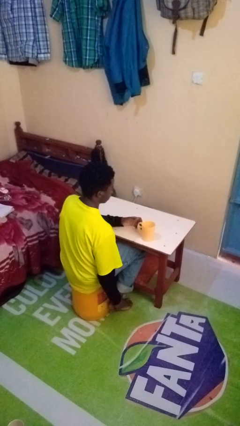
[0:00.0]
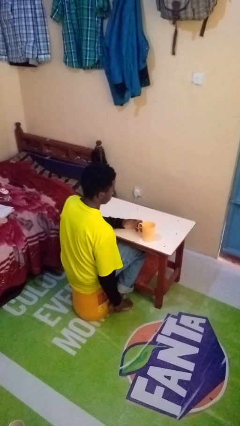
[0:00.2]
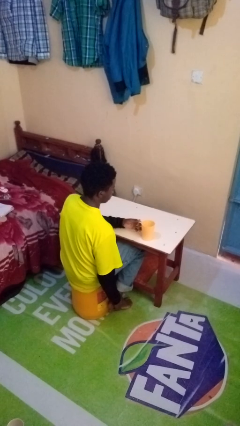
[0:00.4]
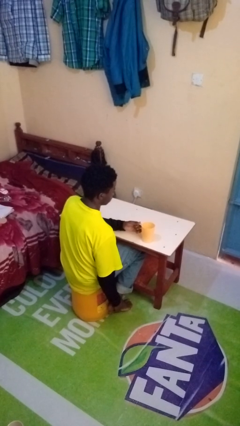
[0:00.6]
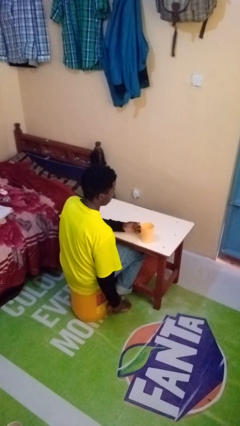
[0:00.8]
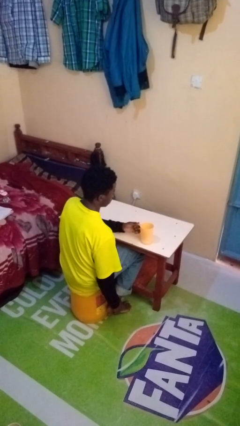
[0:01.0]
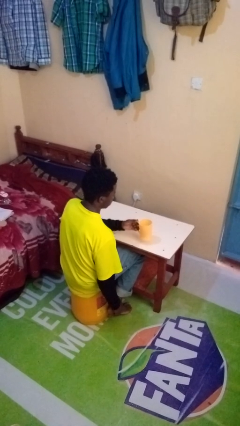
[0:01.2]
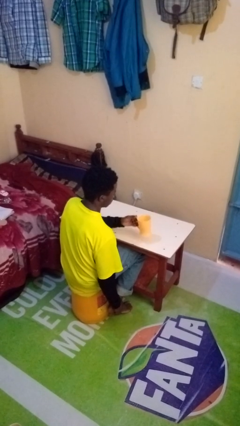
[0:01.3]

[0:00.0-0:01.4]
person picks up object from table

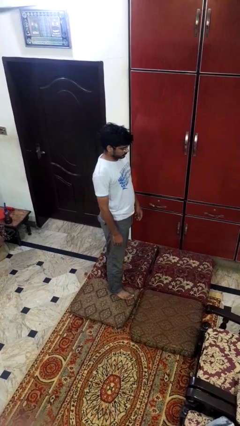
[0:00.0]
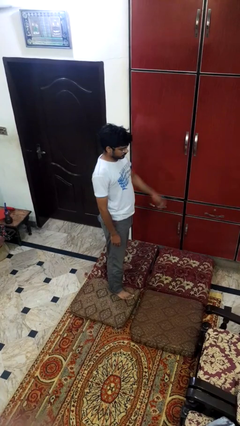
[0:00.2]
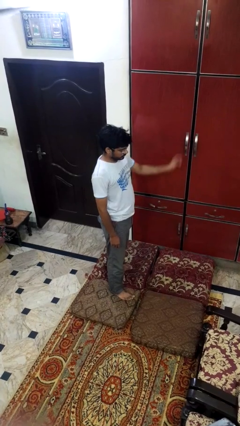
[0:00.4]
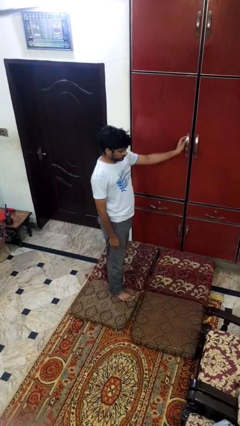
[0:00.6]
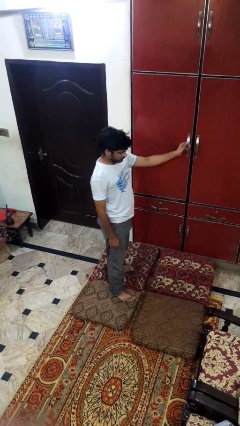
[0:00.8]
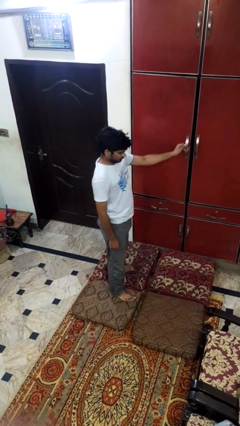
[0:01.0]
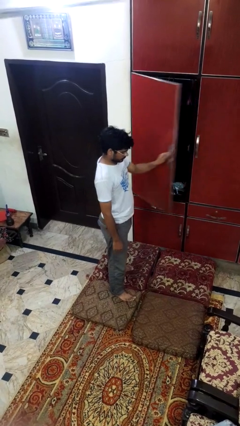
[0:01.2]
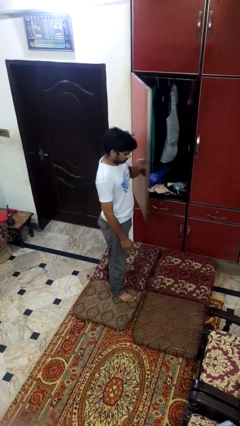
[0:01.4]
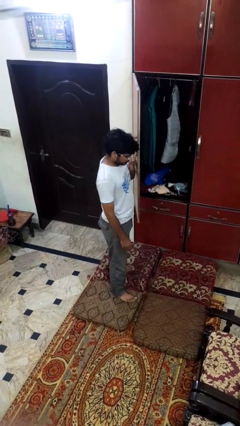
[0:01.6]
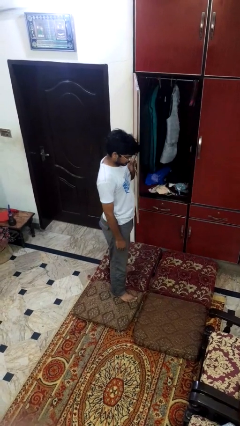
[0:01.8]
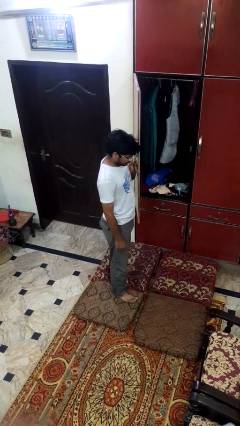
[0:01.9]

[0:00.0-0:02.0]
person opens closet door

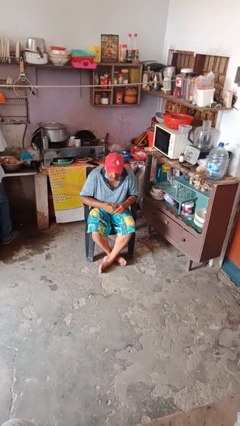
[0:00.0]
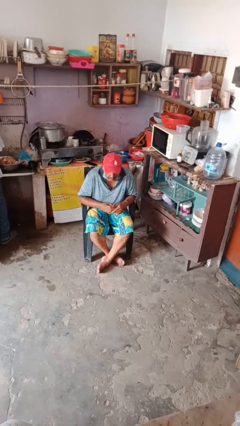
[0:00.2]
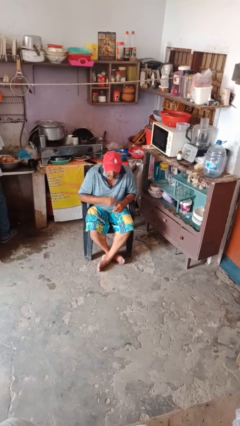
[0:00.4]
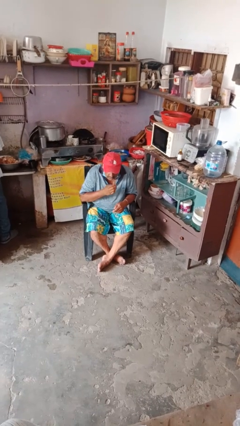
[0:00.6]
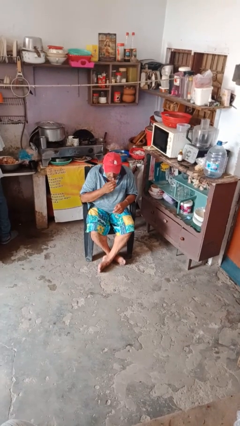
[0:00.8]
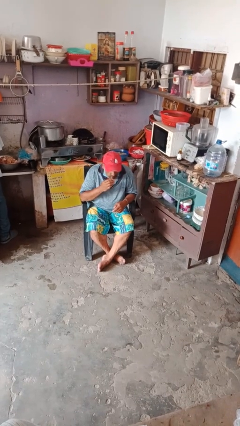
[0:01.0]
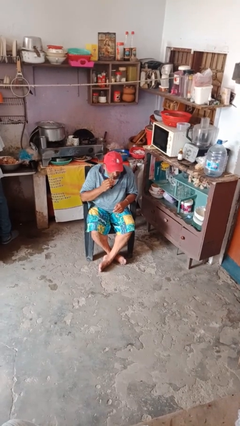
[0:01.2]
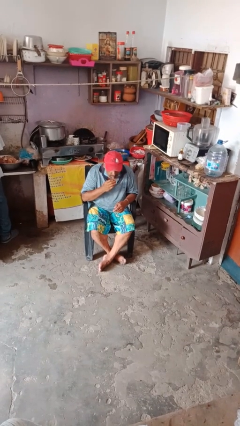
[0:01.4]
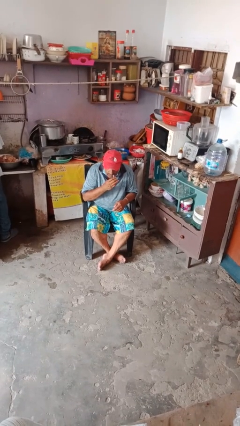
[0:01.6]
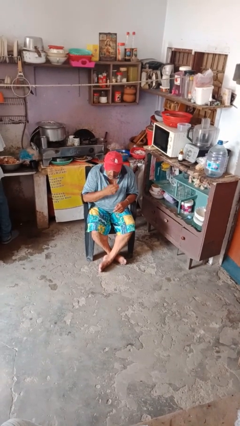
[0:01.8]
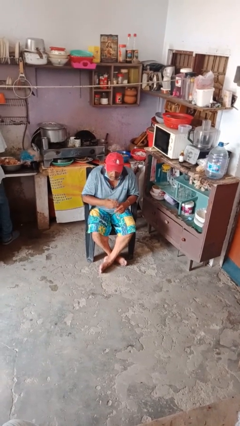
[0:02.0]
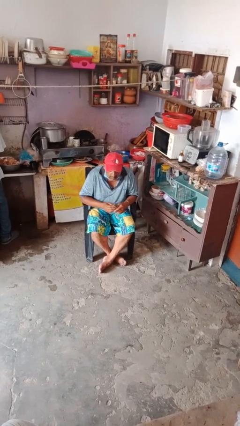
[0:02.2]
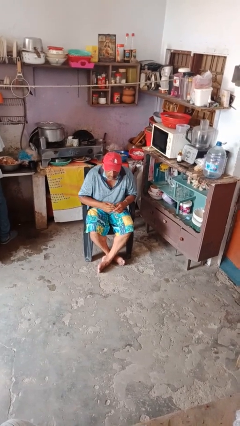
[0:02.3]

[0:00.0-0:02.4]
person applies lip makeup

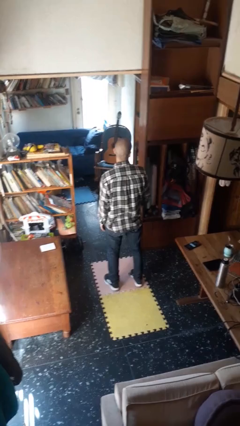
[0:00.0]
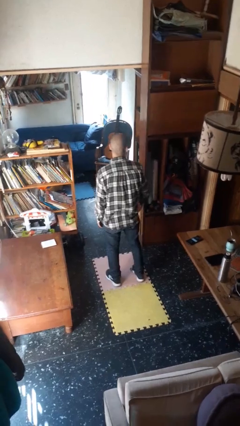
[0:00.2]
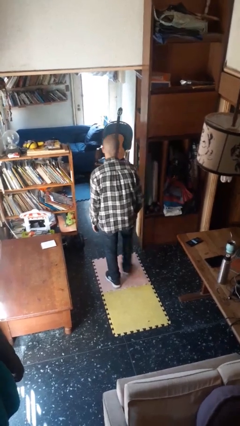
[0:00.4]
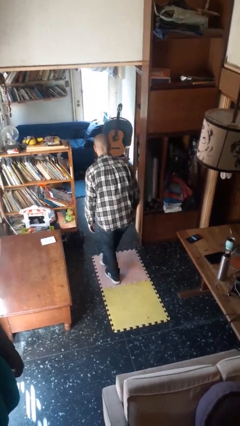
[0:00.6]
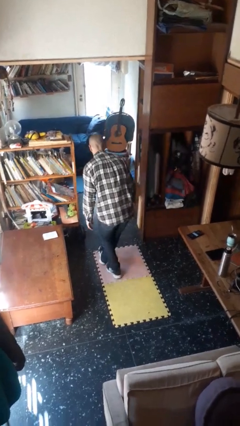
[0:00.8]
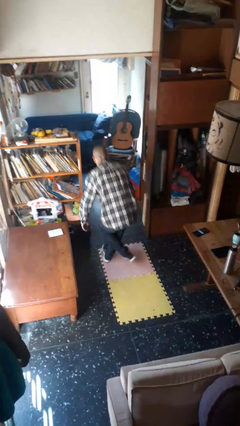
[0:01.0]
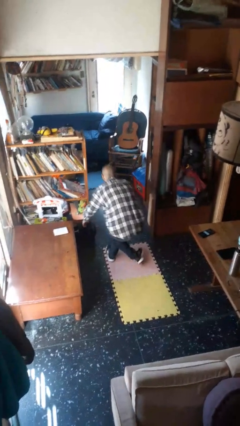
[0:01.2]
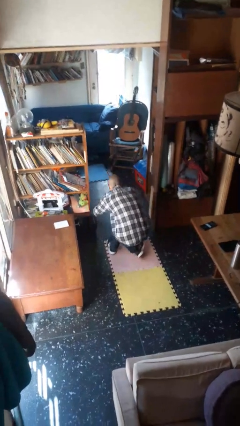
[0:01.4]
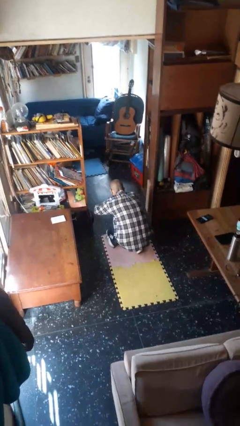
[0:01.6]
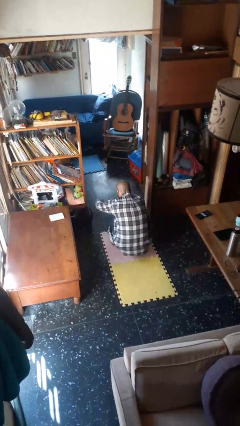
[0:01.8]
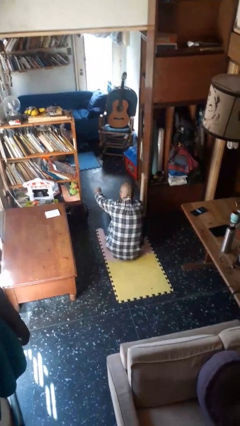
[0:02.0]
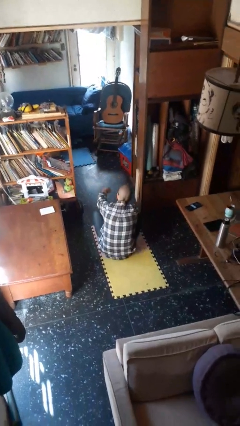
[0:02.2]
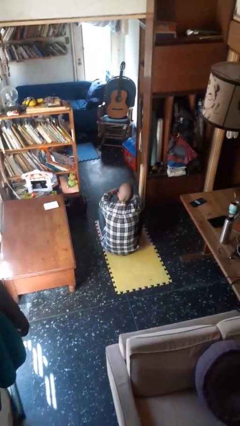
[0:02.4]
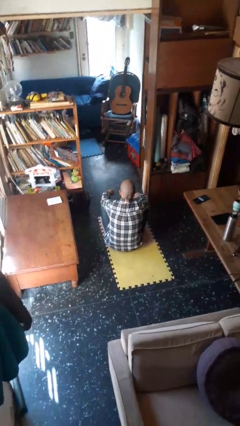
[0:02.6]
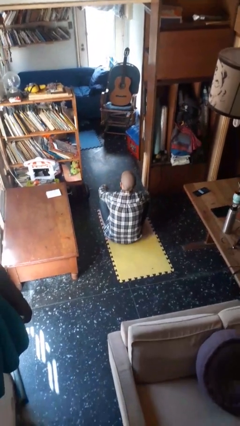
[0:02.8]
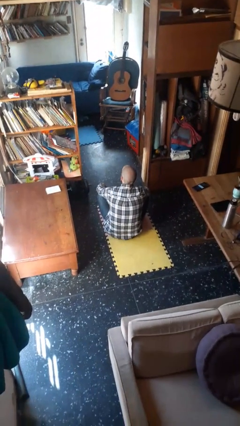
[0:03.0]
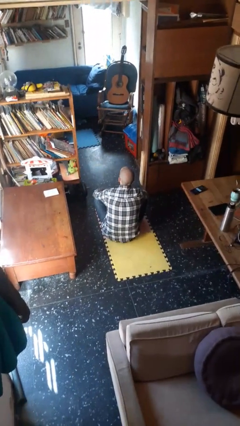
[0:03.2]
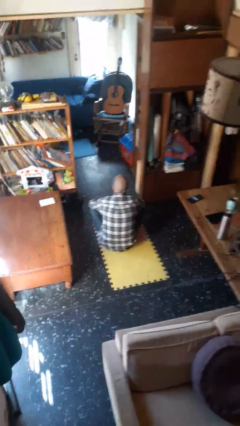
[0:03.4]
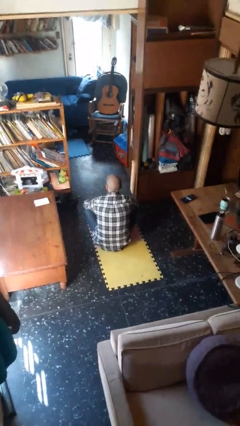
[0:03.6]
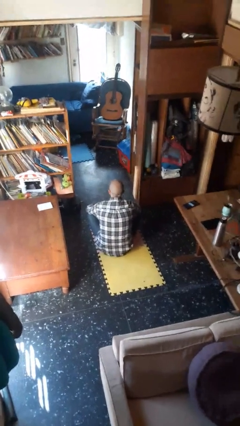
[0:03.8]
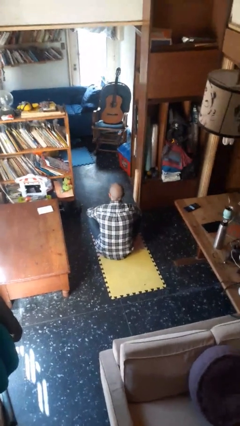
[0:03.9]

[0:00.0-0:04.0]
person sits crisscross

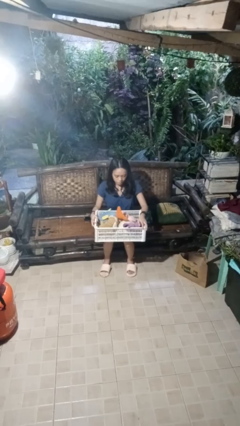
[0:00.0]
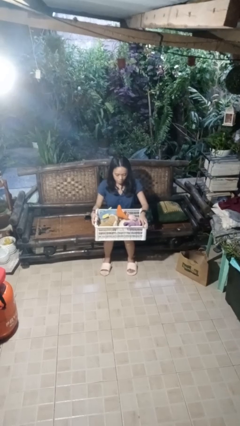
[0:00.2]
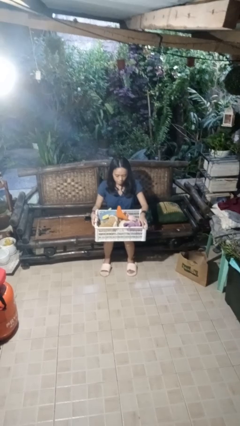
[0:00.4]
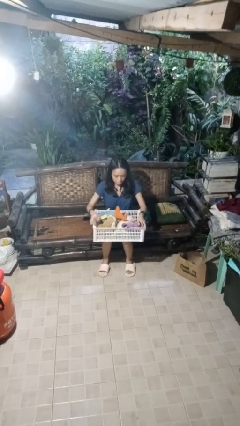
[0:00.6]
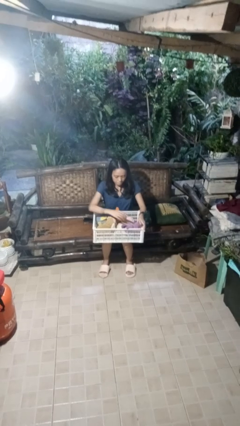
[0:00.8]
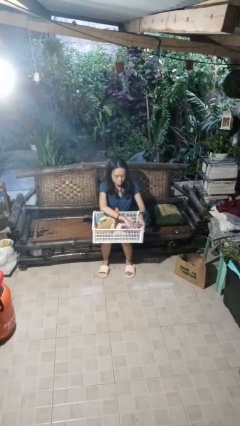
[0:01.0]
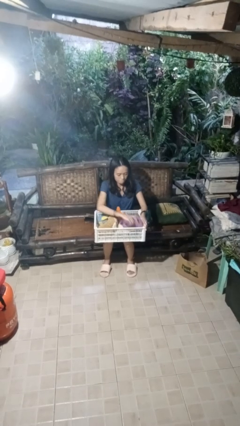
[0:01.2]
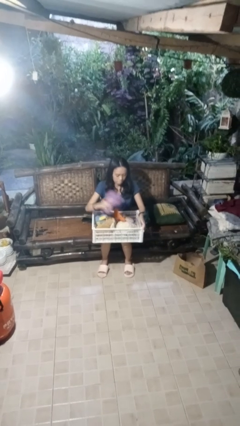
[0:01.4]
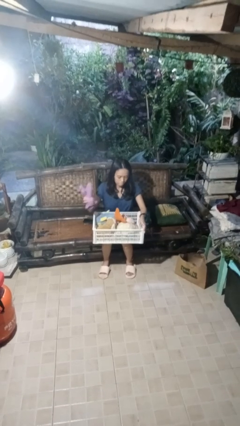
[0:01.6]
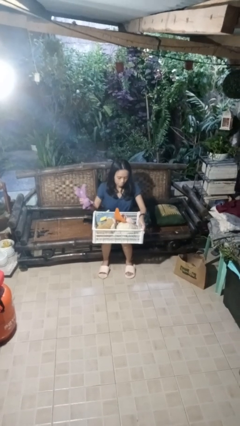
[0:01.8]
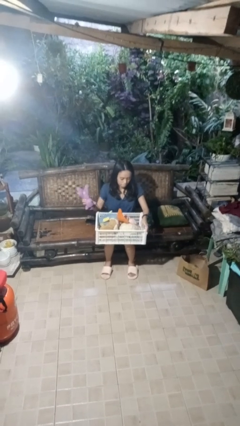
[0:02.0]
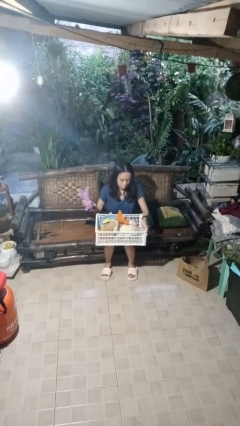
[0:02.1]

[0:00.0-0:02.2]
person takes object from basket

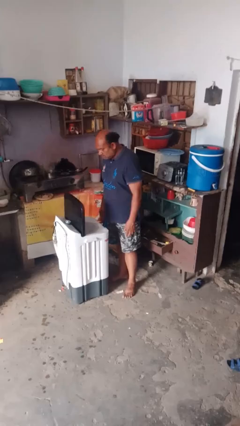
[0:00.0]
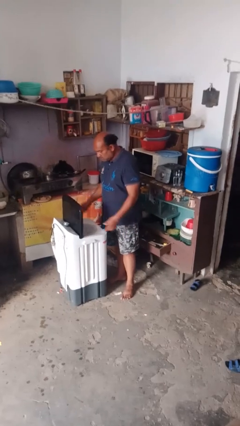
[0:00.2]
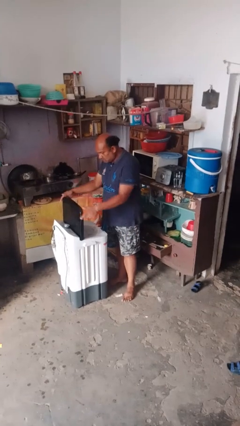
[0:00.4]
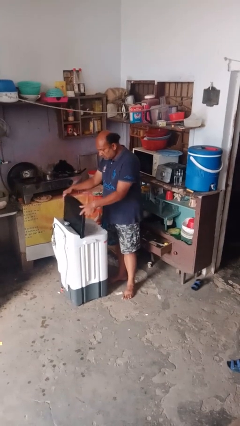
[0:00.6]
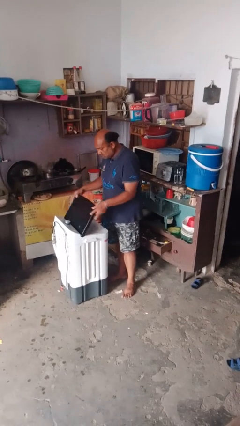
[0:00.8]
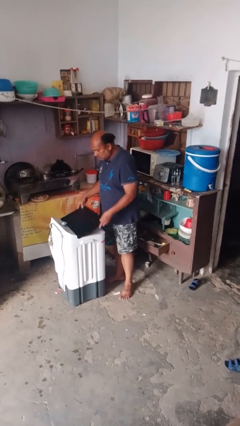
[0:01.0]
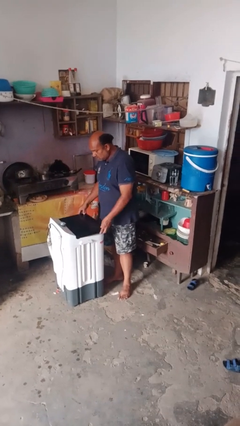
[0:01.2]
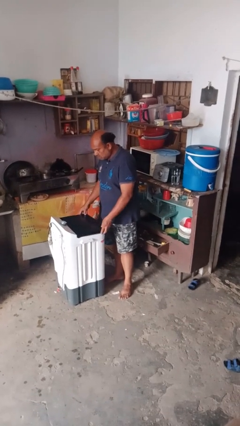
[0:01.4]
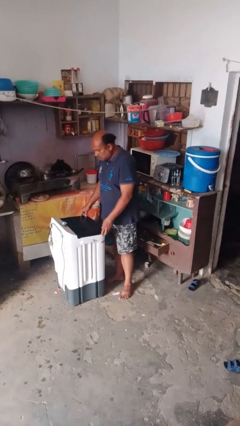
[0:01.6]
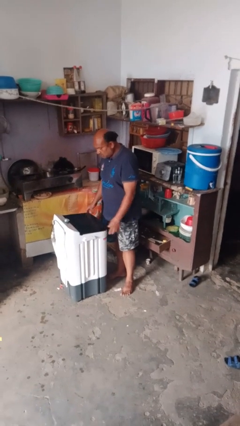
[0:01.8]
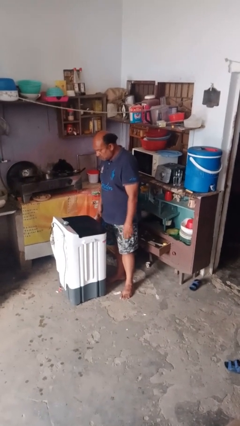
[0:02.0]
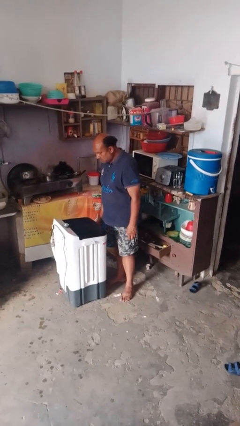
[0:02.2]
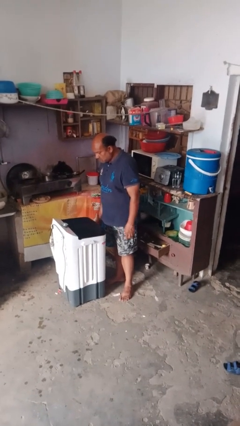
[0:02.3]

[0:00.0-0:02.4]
person closes clothes washer

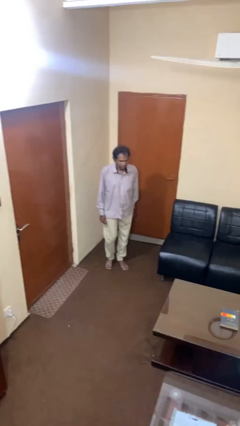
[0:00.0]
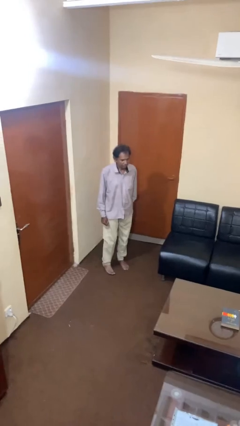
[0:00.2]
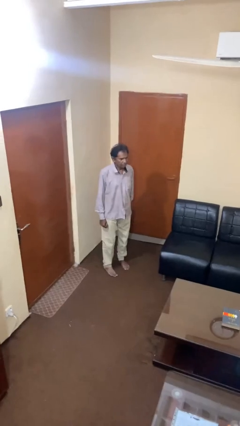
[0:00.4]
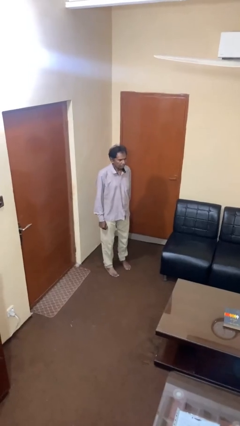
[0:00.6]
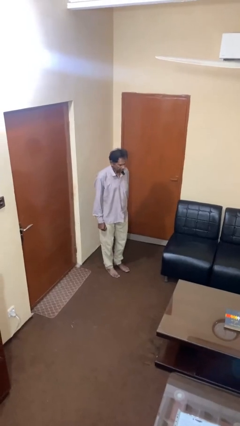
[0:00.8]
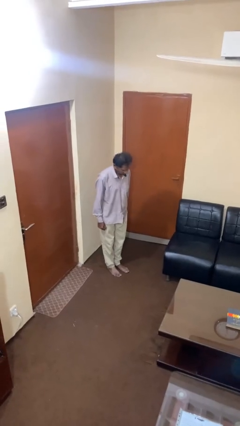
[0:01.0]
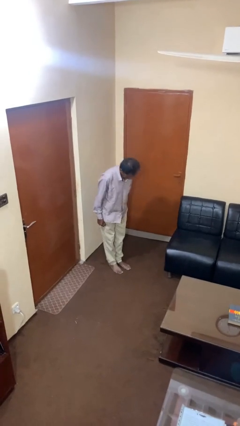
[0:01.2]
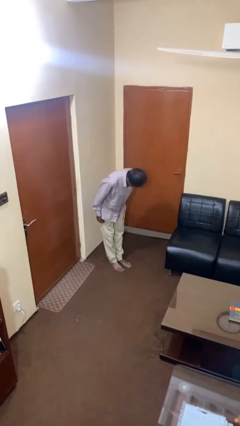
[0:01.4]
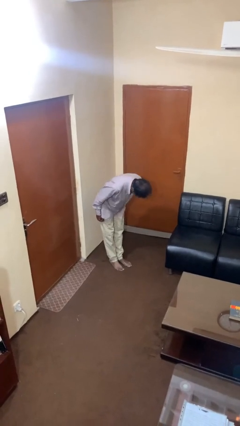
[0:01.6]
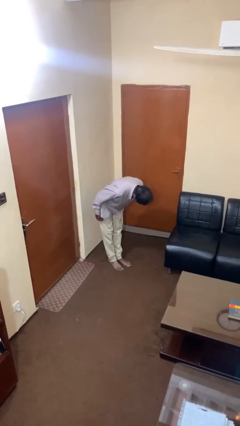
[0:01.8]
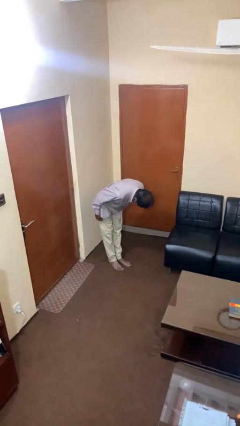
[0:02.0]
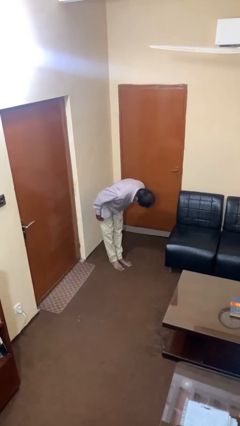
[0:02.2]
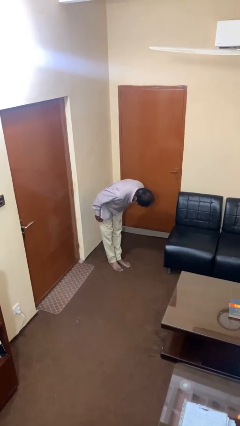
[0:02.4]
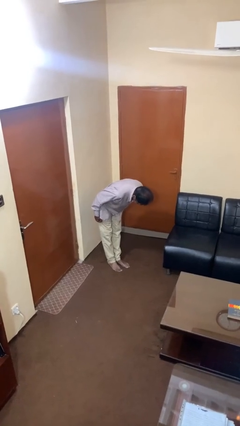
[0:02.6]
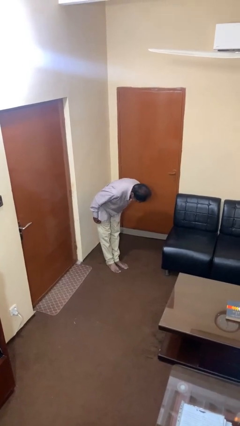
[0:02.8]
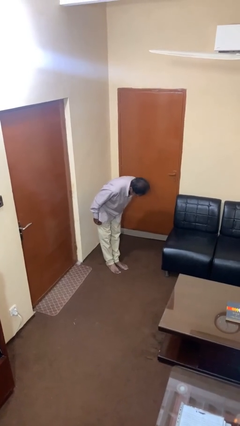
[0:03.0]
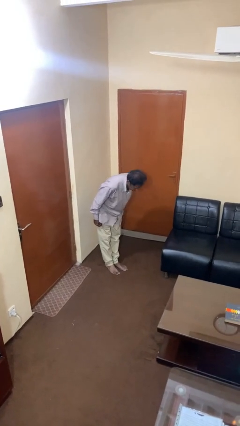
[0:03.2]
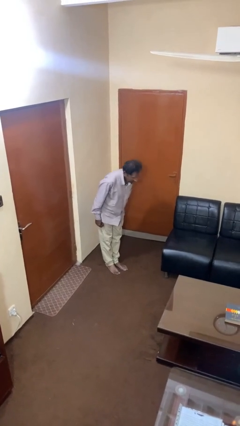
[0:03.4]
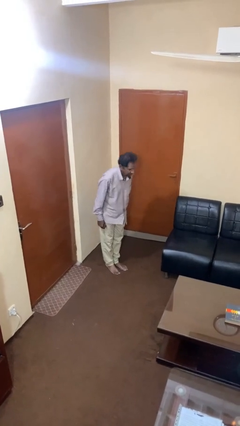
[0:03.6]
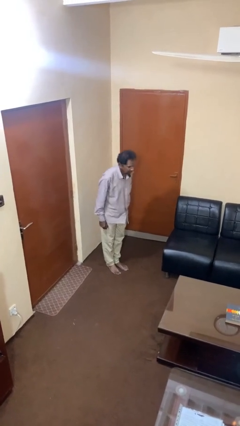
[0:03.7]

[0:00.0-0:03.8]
person bows
